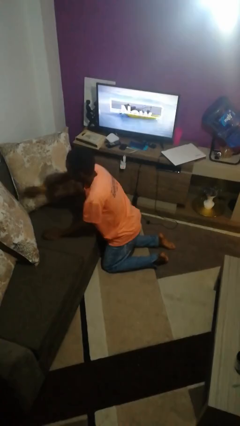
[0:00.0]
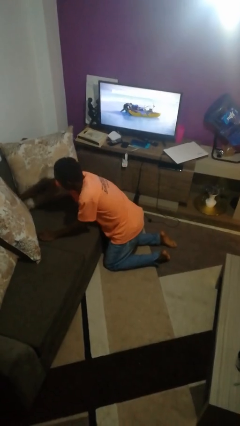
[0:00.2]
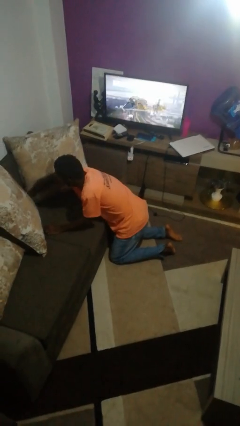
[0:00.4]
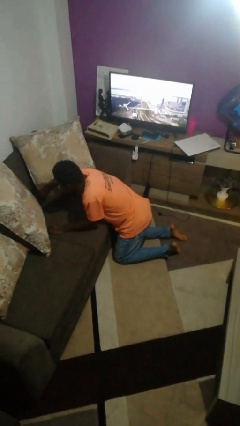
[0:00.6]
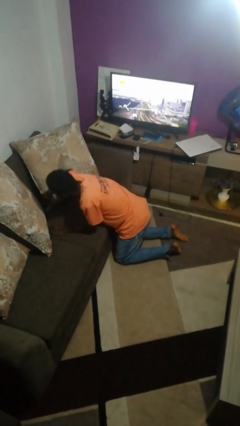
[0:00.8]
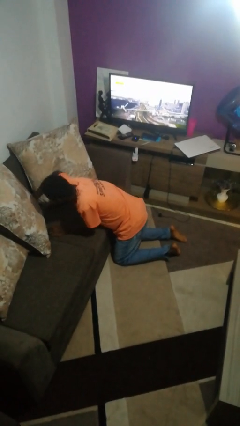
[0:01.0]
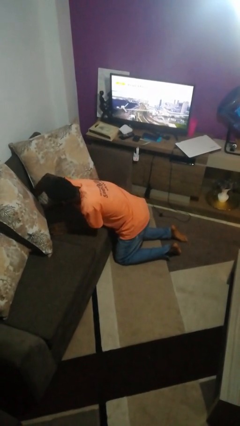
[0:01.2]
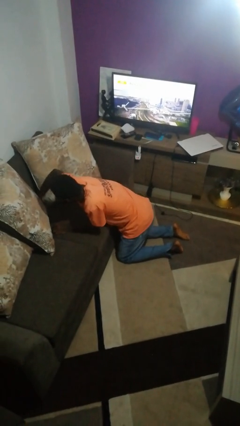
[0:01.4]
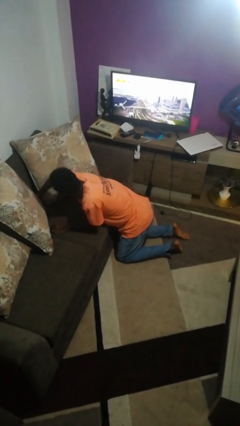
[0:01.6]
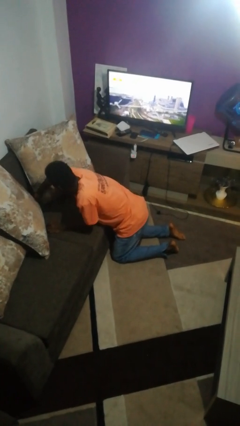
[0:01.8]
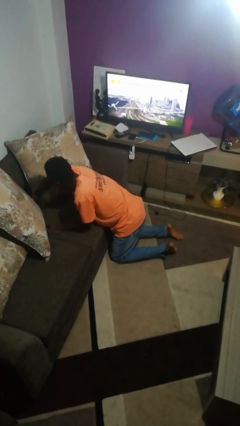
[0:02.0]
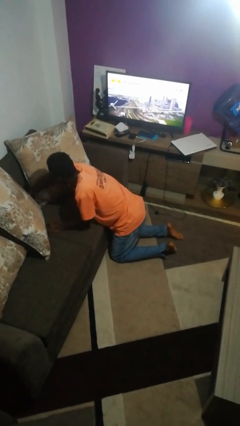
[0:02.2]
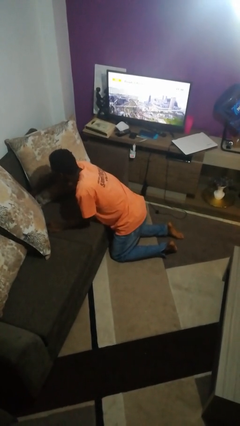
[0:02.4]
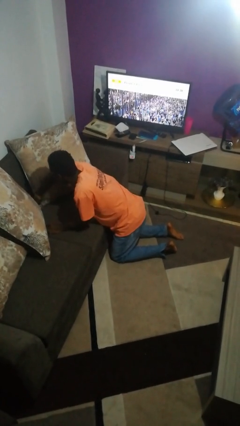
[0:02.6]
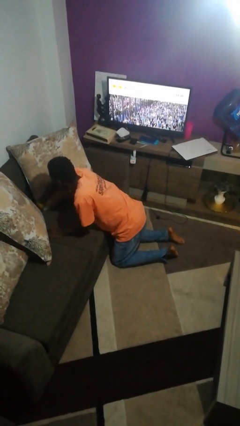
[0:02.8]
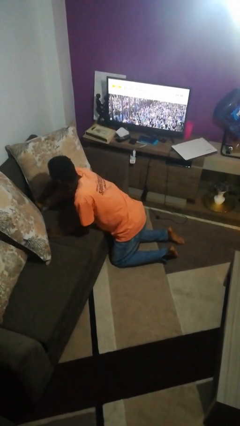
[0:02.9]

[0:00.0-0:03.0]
person searches in couch

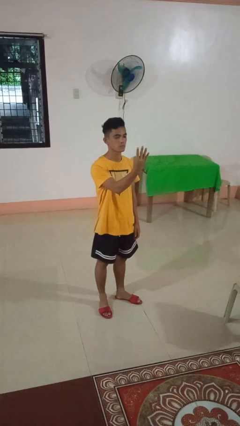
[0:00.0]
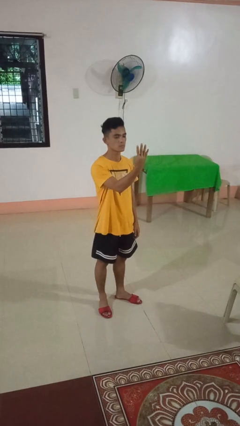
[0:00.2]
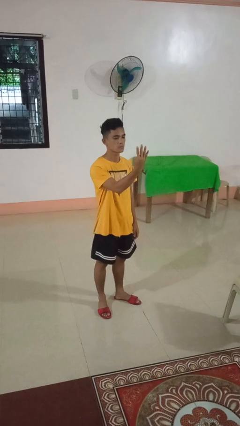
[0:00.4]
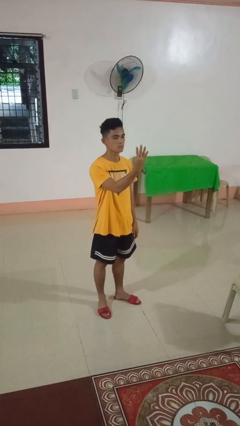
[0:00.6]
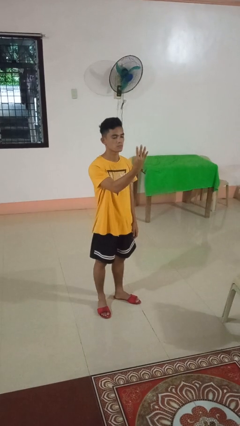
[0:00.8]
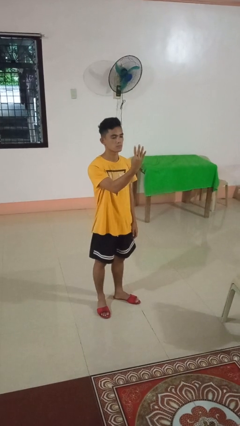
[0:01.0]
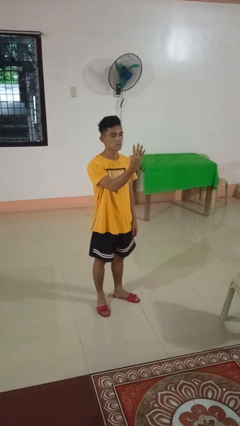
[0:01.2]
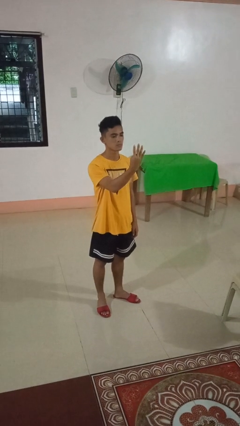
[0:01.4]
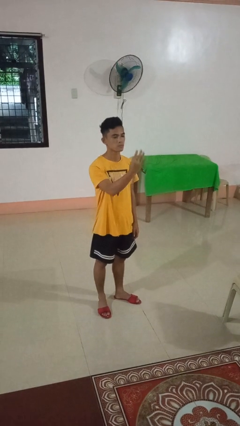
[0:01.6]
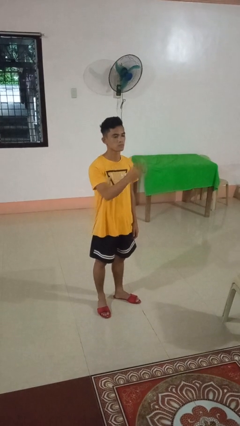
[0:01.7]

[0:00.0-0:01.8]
person gestures number four

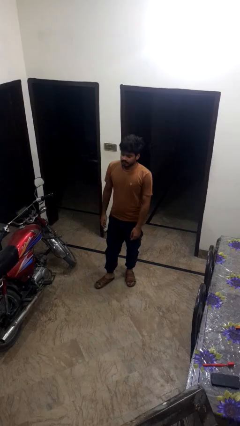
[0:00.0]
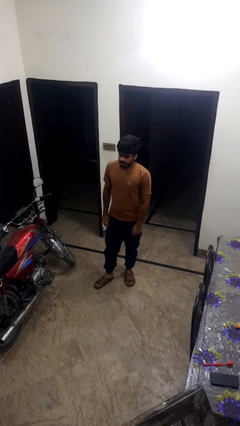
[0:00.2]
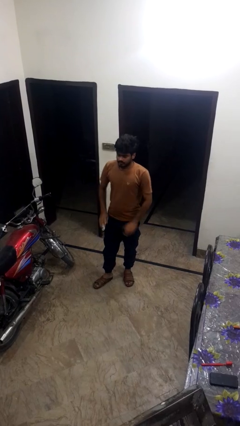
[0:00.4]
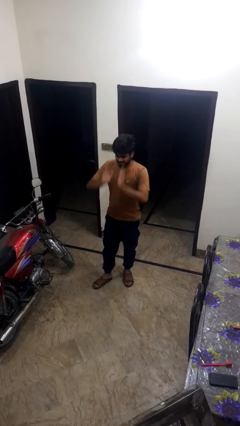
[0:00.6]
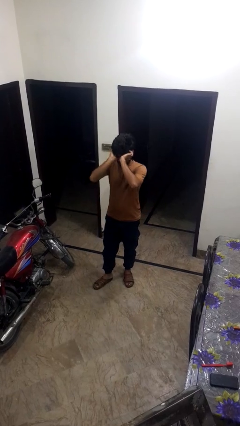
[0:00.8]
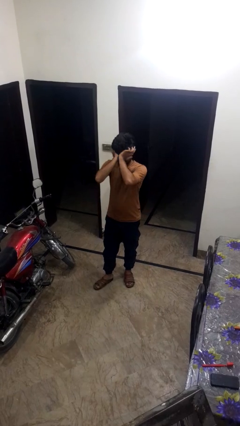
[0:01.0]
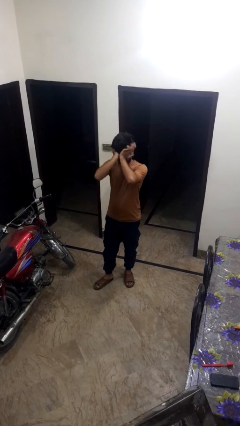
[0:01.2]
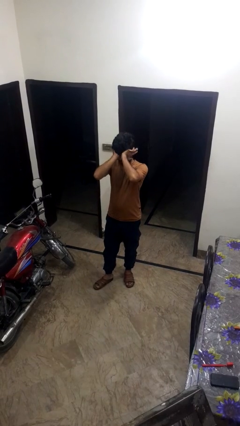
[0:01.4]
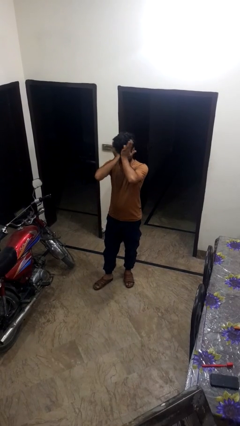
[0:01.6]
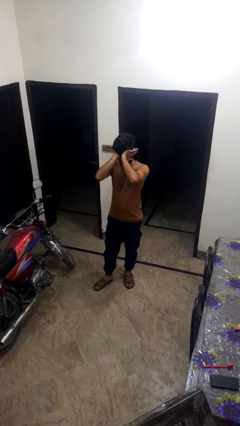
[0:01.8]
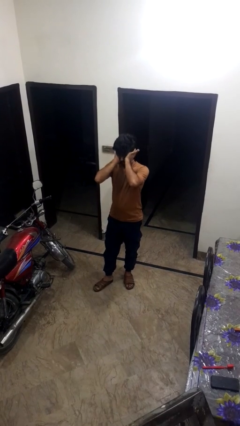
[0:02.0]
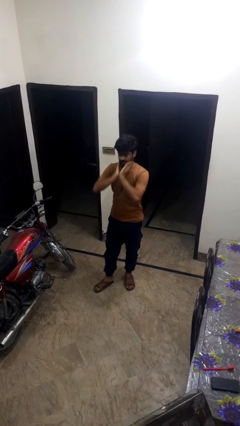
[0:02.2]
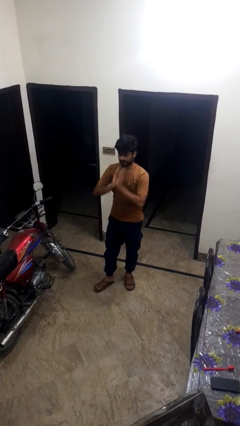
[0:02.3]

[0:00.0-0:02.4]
person rubs eyes

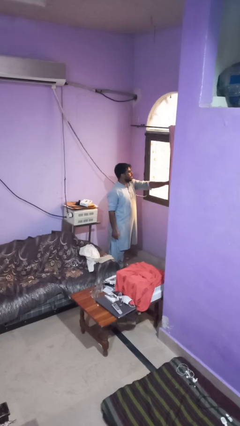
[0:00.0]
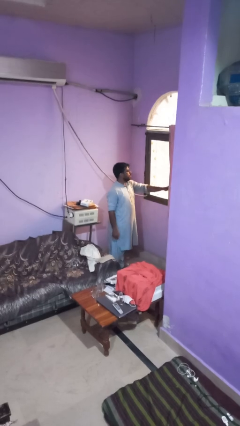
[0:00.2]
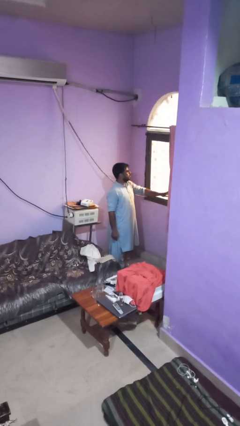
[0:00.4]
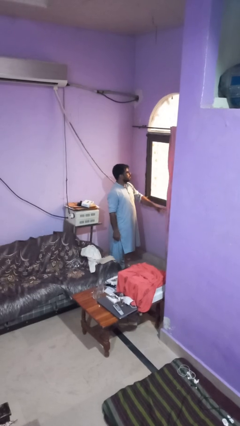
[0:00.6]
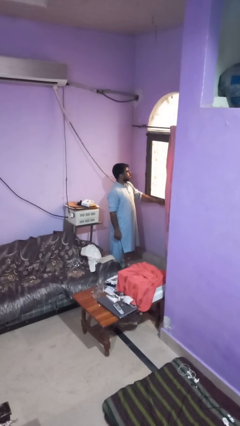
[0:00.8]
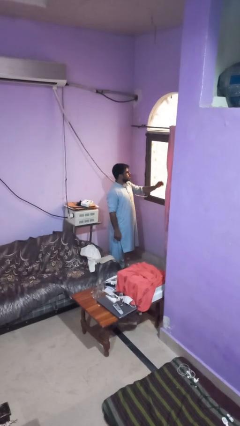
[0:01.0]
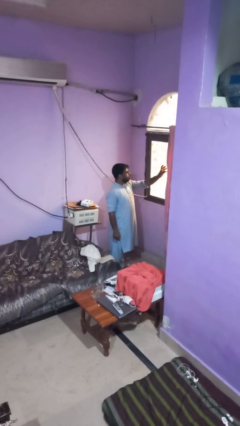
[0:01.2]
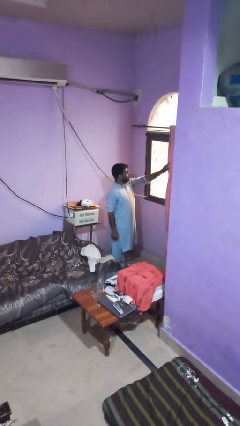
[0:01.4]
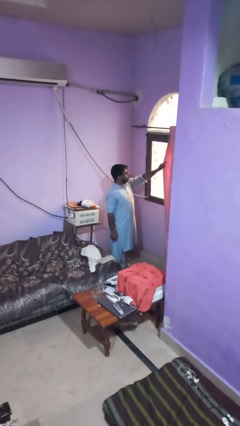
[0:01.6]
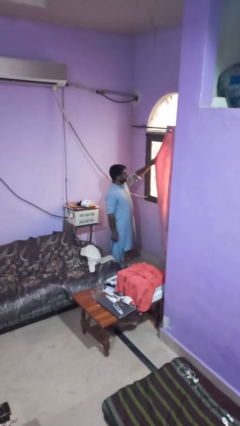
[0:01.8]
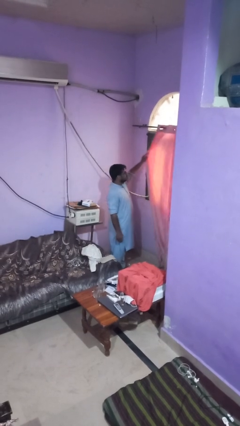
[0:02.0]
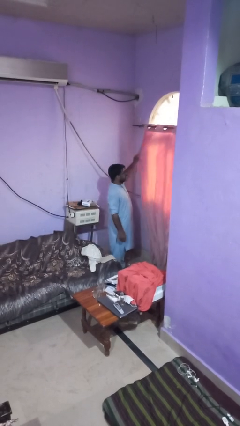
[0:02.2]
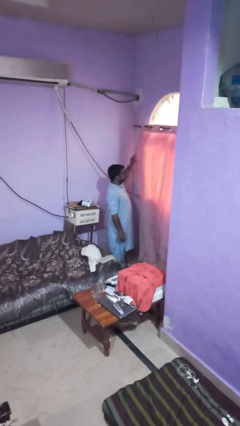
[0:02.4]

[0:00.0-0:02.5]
person closes curtains

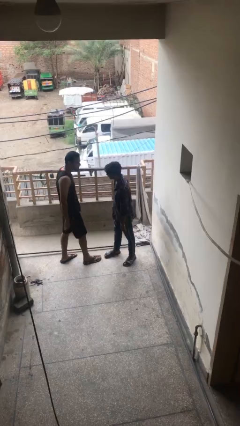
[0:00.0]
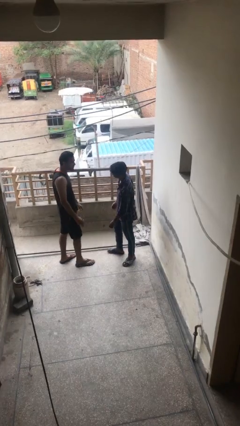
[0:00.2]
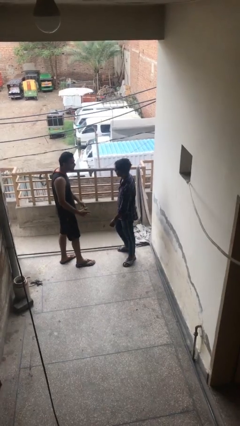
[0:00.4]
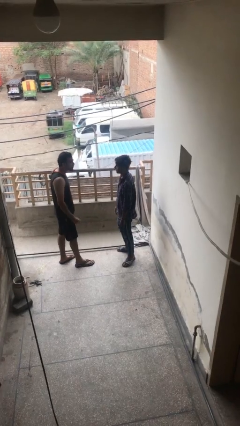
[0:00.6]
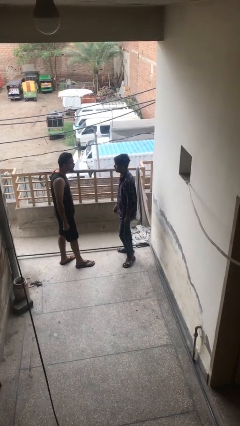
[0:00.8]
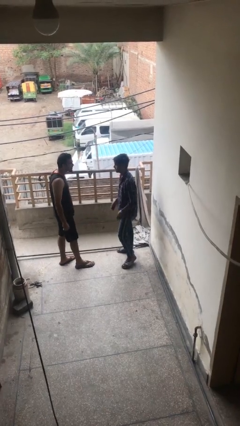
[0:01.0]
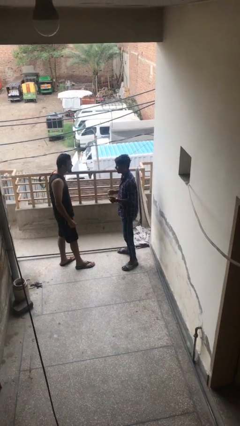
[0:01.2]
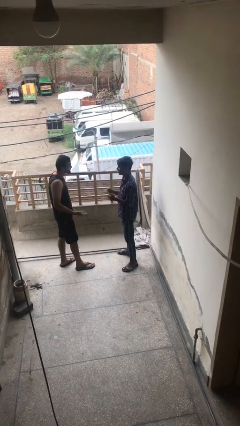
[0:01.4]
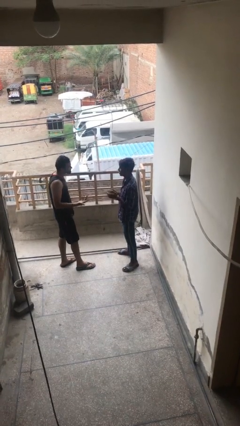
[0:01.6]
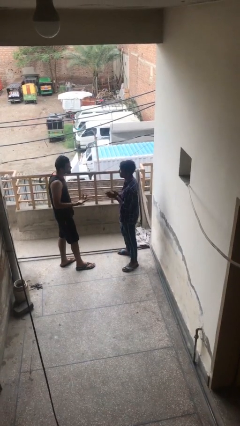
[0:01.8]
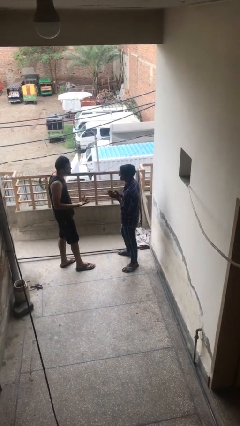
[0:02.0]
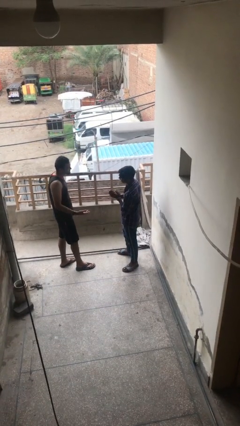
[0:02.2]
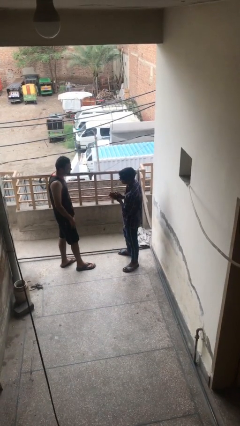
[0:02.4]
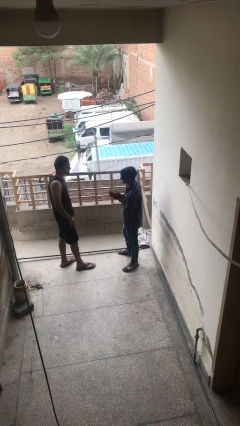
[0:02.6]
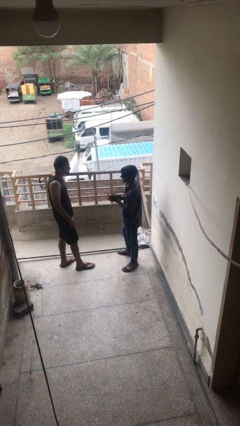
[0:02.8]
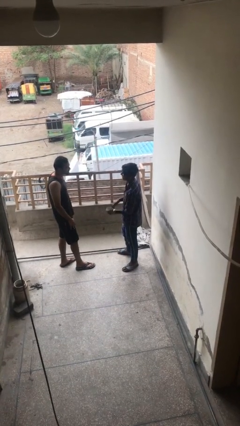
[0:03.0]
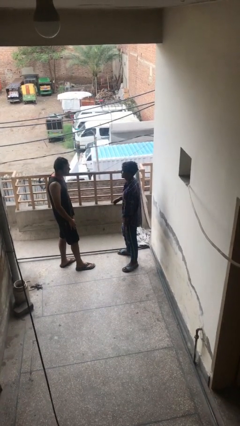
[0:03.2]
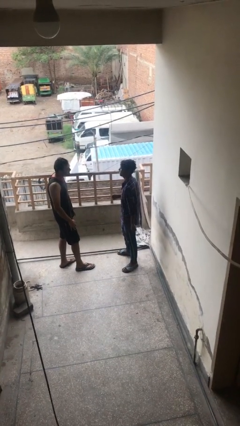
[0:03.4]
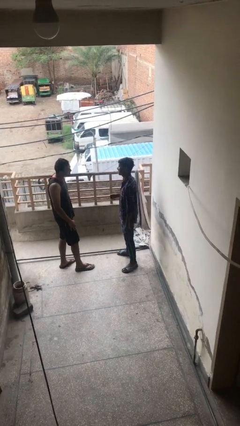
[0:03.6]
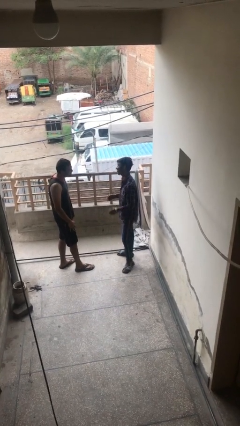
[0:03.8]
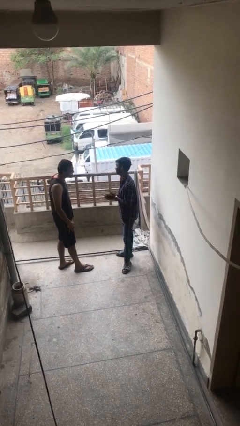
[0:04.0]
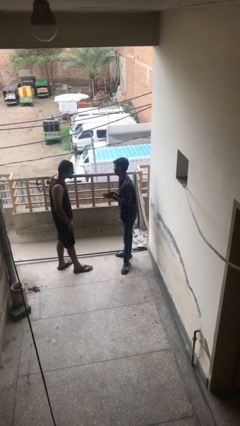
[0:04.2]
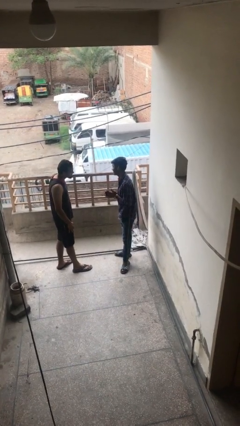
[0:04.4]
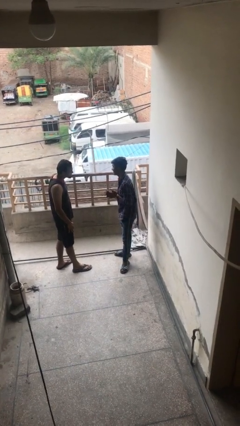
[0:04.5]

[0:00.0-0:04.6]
person talks to person

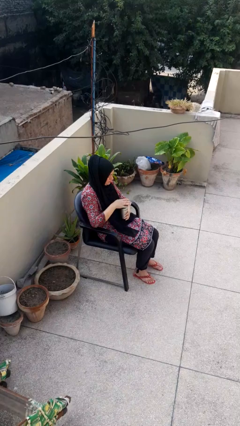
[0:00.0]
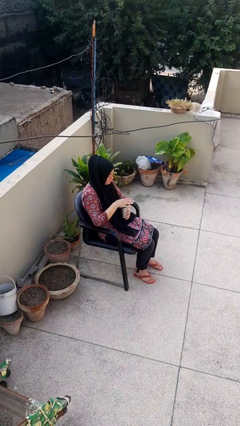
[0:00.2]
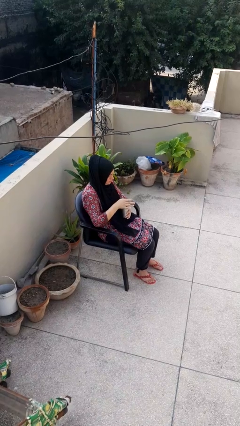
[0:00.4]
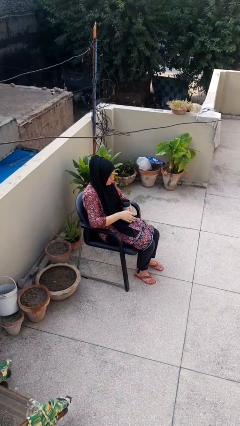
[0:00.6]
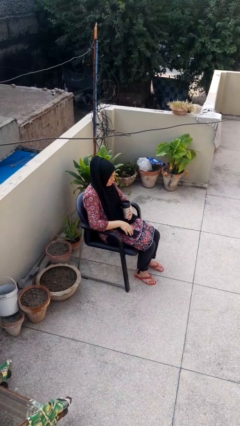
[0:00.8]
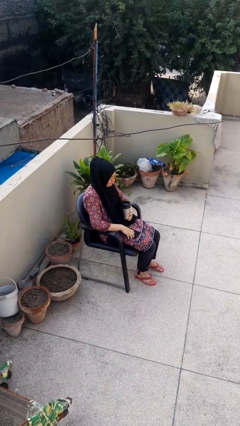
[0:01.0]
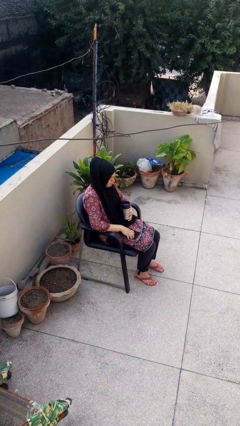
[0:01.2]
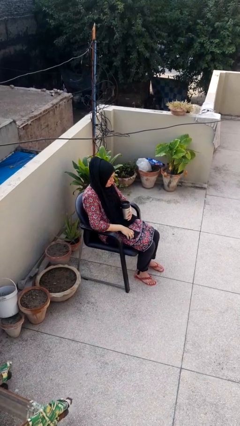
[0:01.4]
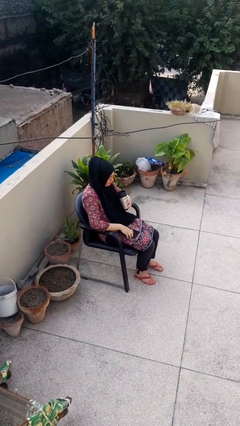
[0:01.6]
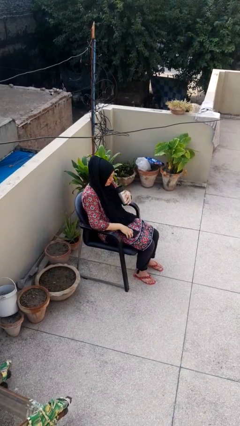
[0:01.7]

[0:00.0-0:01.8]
person opens beverage can

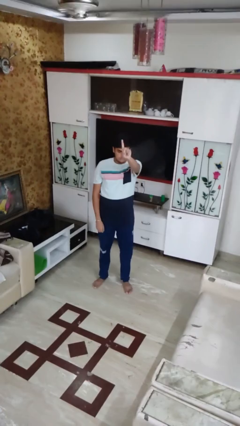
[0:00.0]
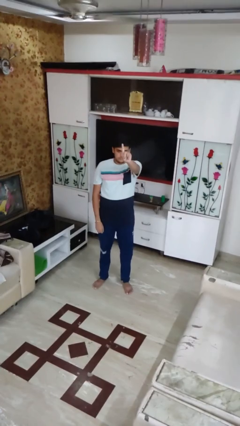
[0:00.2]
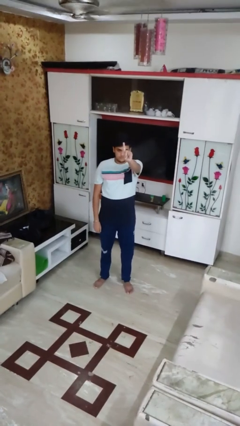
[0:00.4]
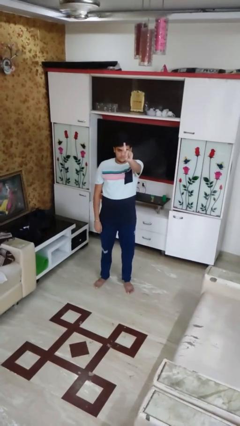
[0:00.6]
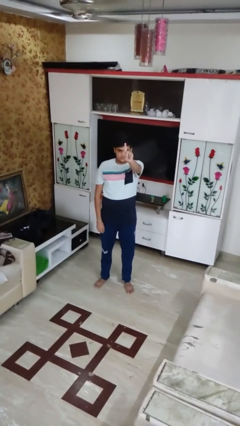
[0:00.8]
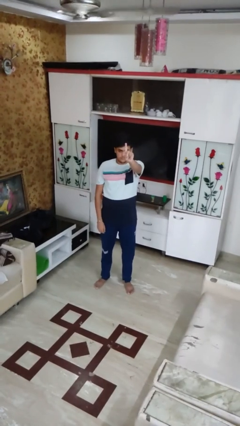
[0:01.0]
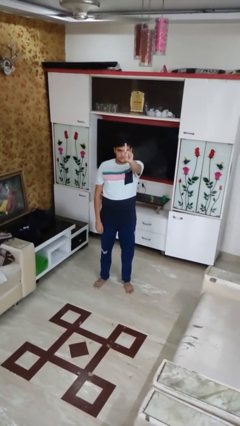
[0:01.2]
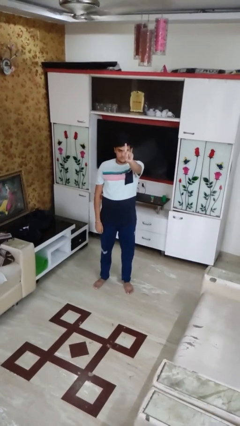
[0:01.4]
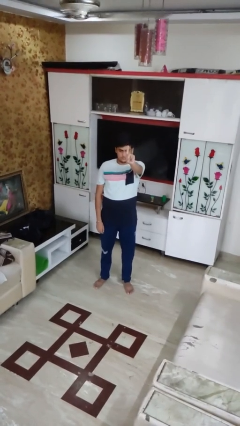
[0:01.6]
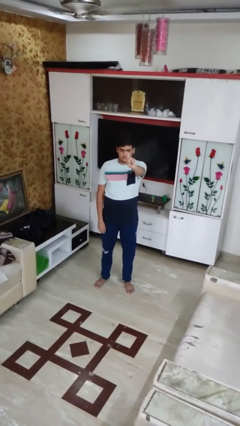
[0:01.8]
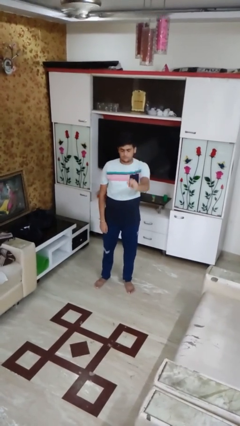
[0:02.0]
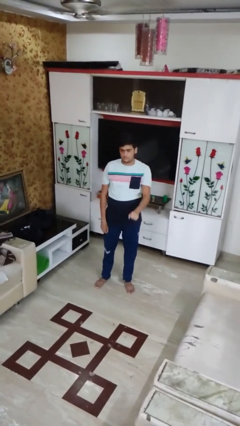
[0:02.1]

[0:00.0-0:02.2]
person gestures number one
